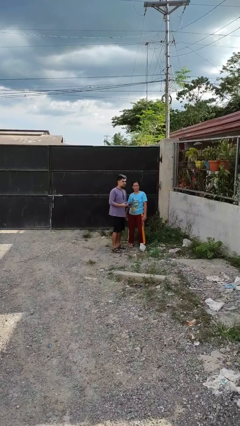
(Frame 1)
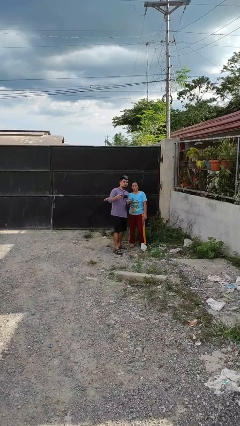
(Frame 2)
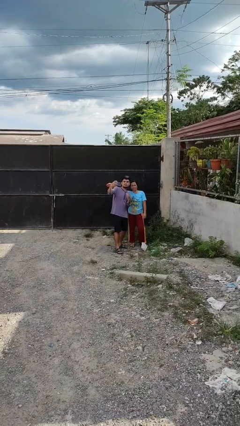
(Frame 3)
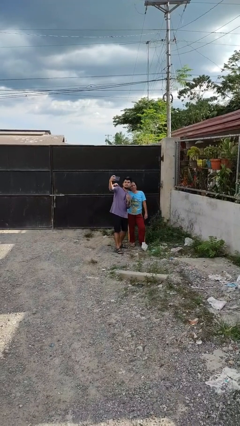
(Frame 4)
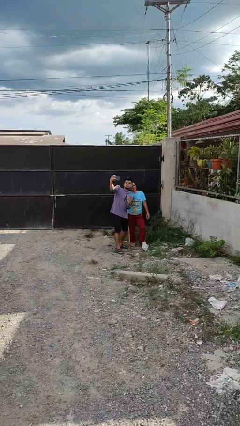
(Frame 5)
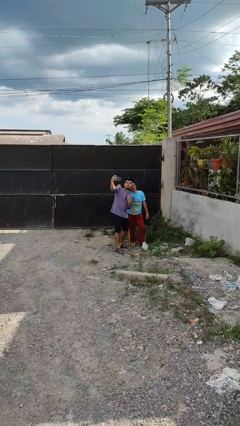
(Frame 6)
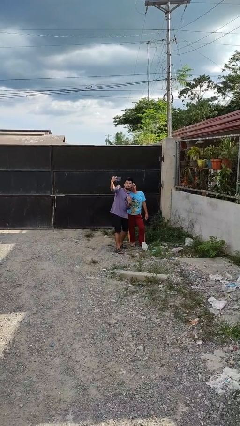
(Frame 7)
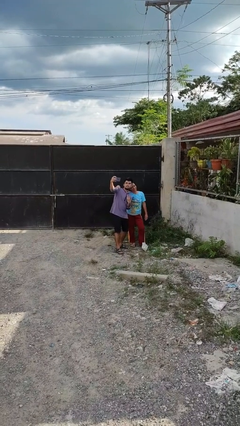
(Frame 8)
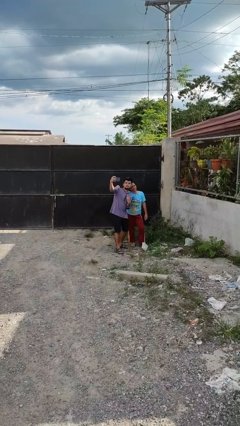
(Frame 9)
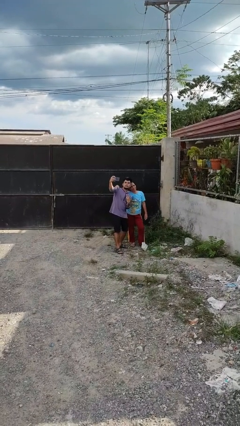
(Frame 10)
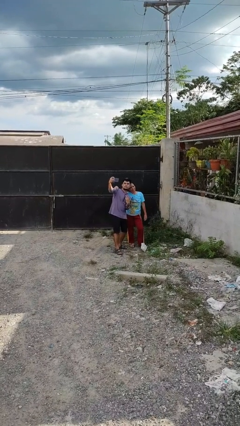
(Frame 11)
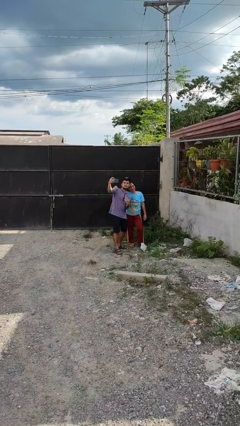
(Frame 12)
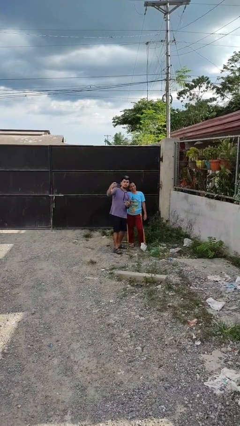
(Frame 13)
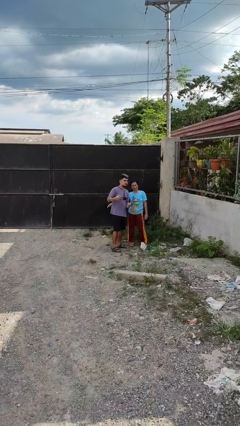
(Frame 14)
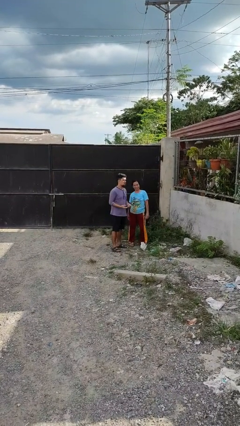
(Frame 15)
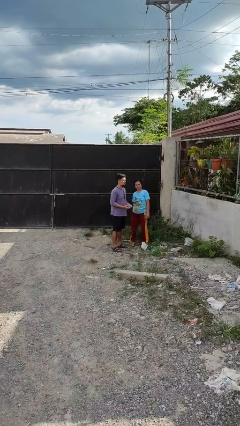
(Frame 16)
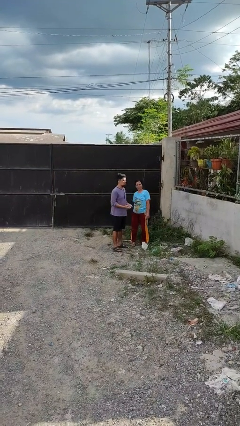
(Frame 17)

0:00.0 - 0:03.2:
person takes selfie with person

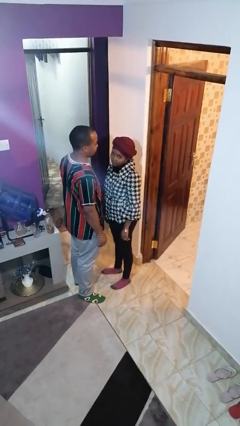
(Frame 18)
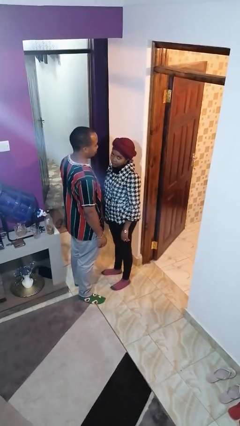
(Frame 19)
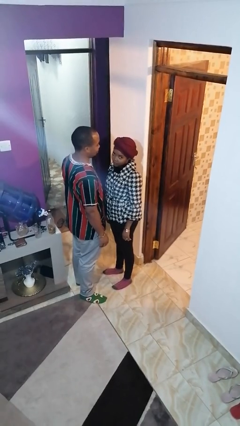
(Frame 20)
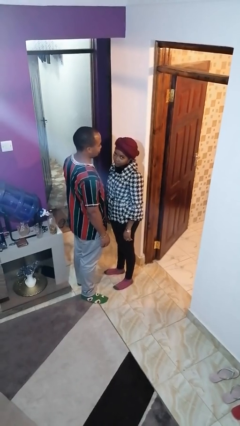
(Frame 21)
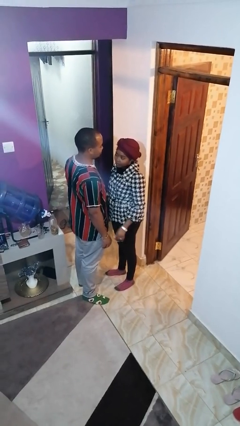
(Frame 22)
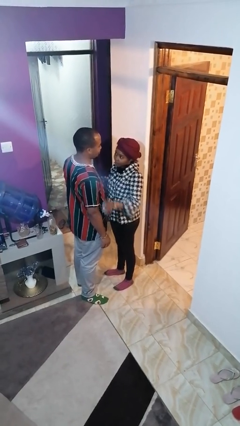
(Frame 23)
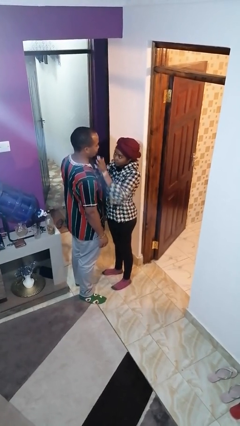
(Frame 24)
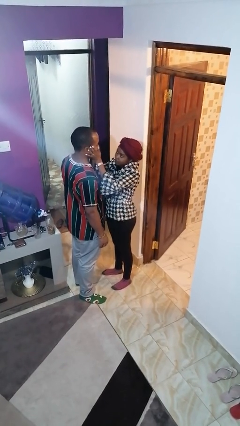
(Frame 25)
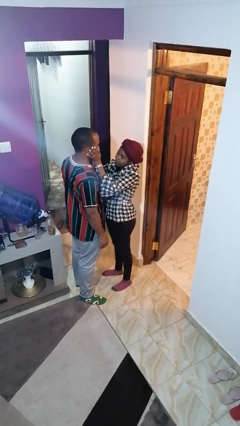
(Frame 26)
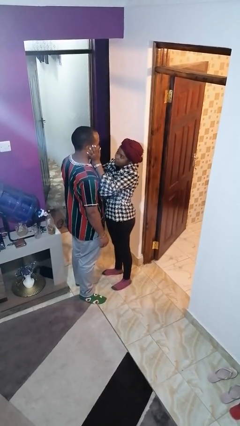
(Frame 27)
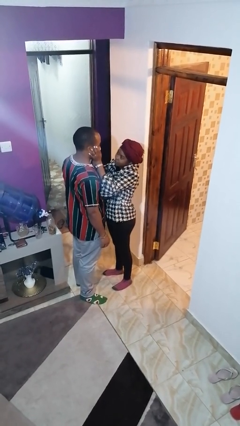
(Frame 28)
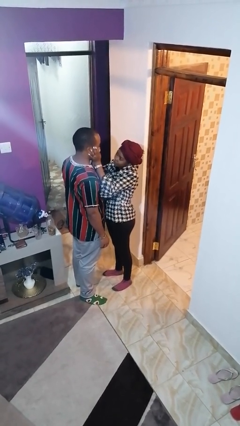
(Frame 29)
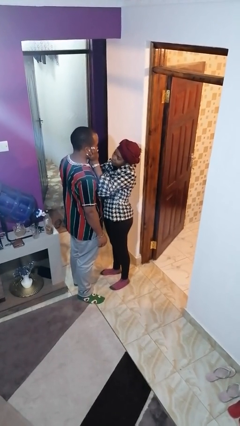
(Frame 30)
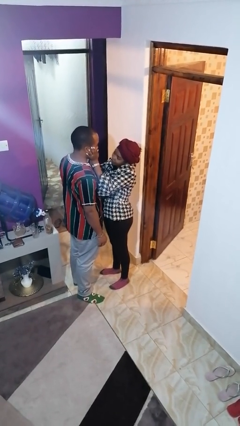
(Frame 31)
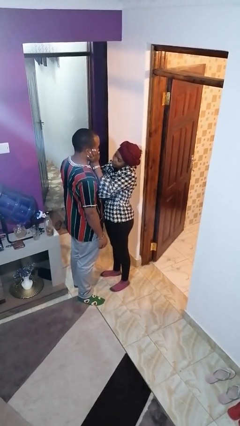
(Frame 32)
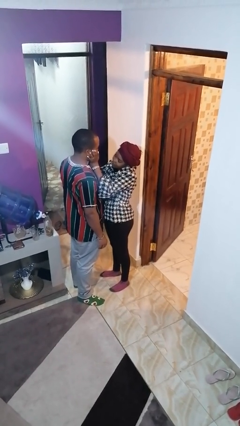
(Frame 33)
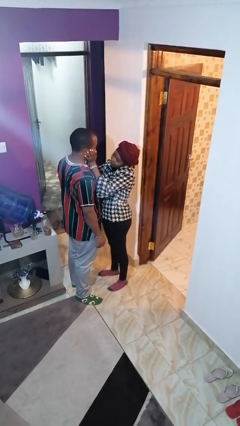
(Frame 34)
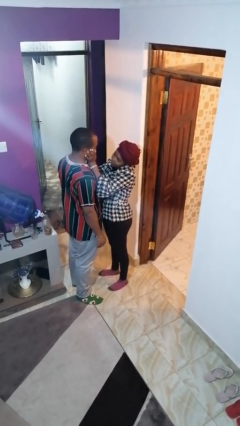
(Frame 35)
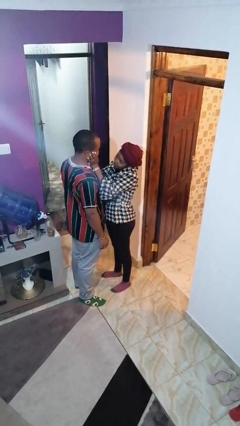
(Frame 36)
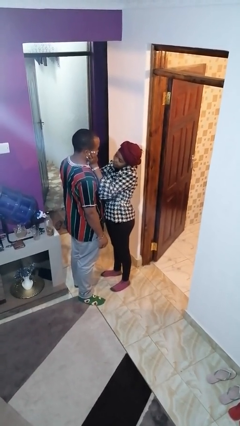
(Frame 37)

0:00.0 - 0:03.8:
person touches face of person

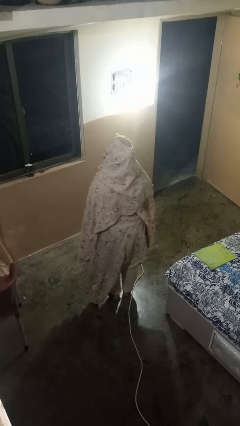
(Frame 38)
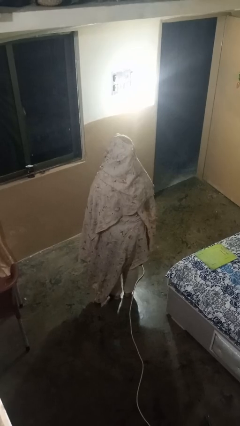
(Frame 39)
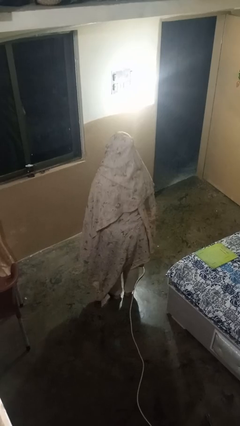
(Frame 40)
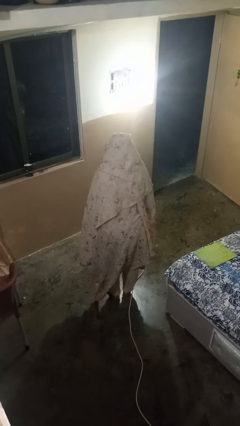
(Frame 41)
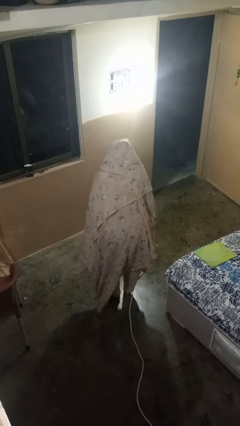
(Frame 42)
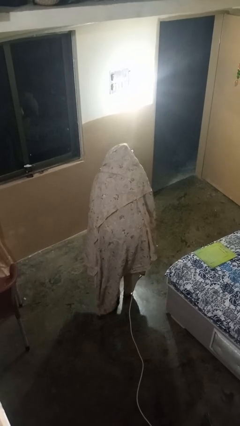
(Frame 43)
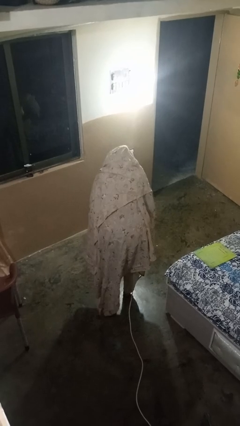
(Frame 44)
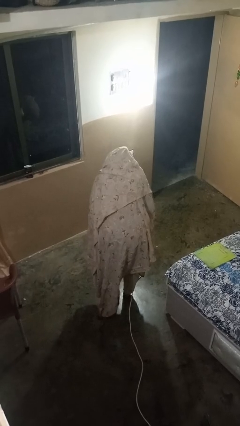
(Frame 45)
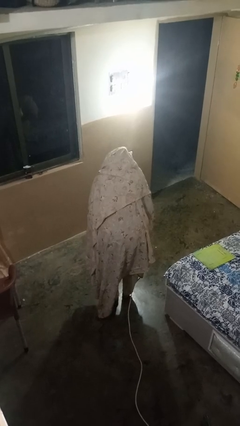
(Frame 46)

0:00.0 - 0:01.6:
person bows

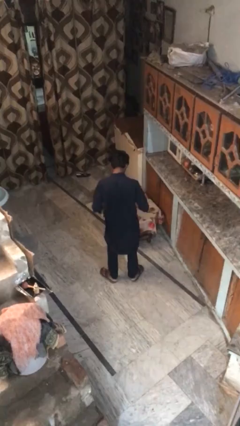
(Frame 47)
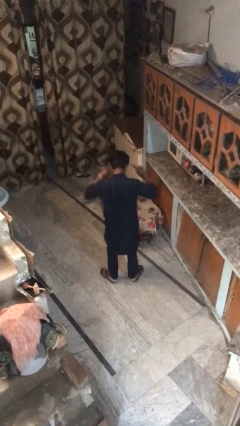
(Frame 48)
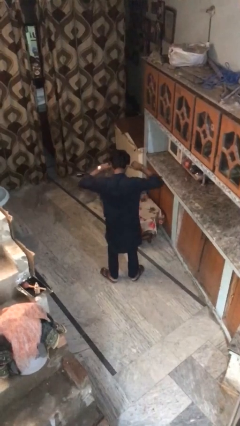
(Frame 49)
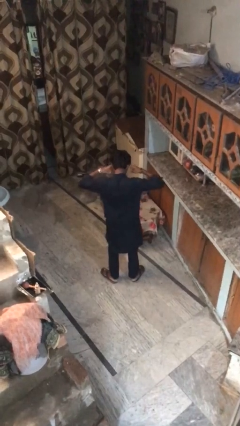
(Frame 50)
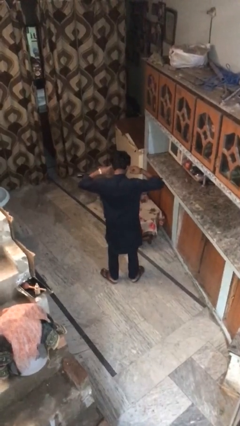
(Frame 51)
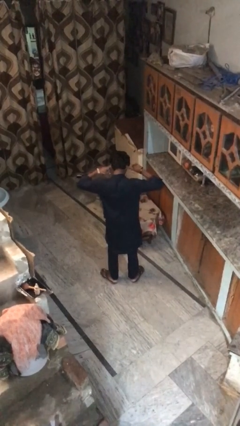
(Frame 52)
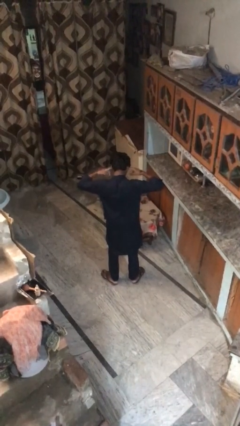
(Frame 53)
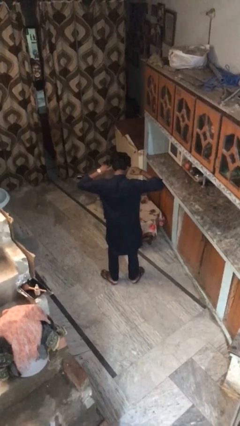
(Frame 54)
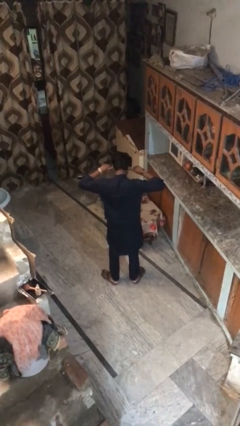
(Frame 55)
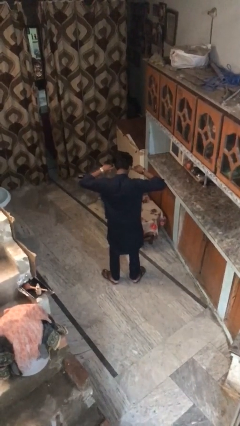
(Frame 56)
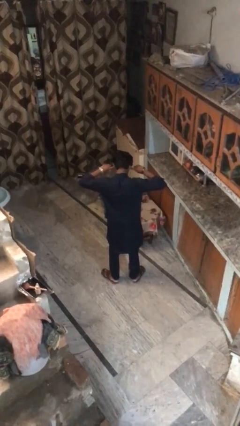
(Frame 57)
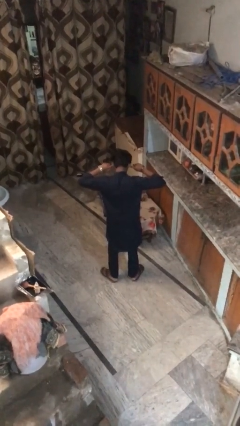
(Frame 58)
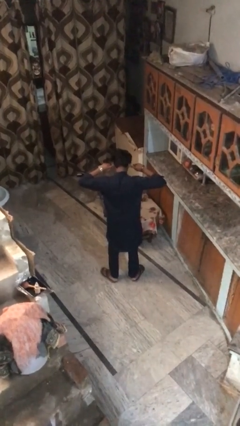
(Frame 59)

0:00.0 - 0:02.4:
person puts fingers in ear

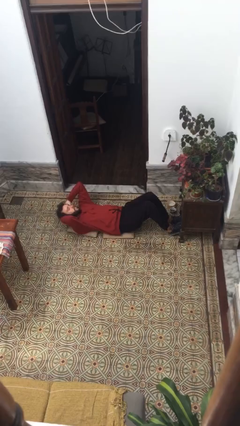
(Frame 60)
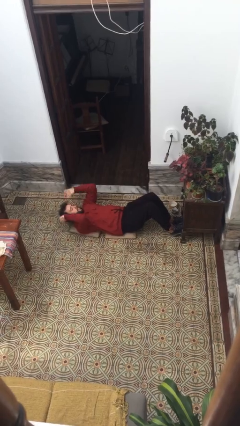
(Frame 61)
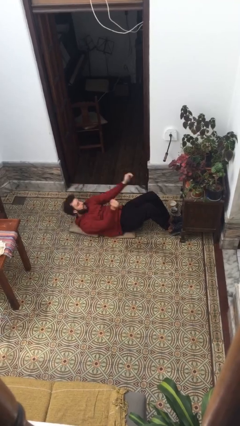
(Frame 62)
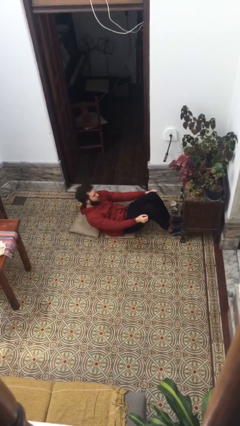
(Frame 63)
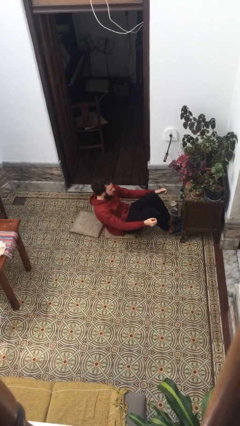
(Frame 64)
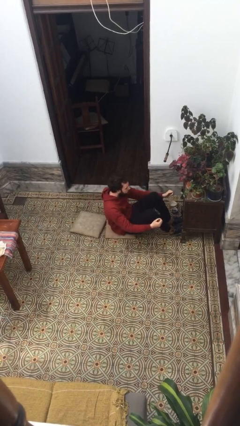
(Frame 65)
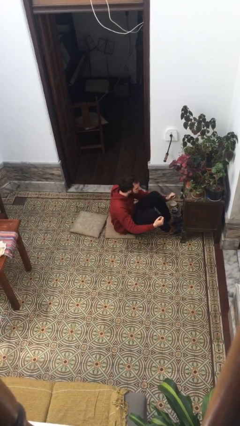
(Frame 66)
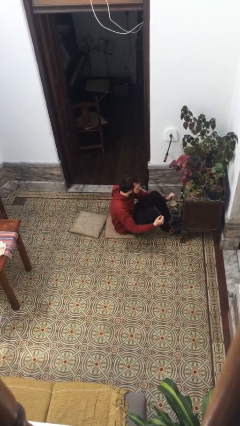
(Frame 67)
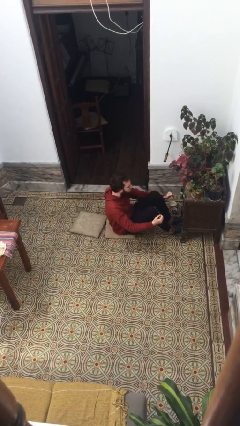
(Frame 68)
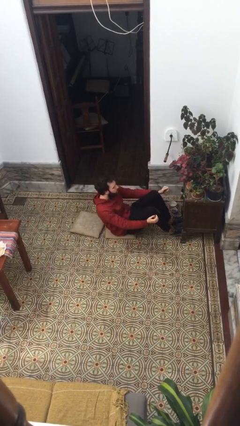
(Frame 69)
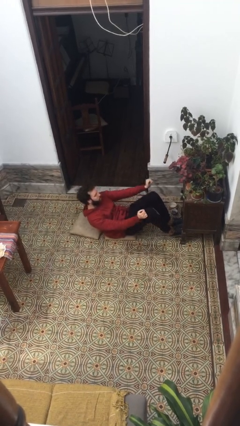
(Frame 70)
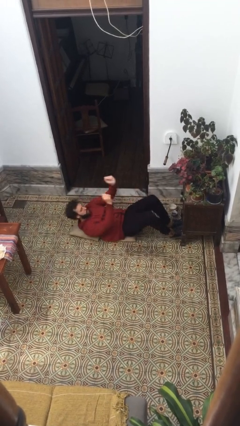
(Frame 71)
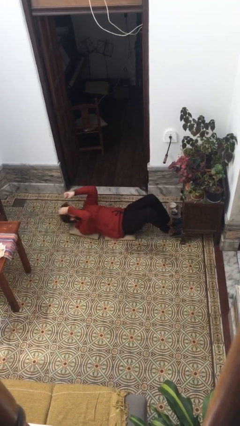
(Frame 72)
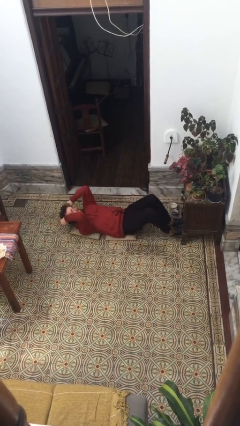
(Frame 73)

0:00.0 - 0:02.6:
person exercises with situp

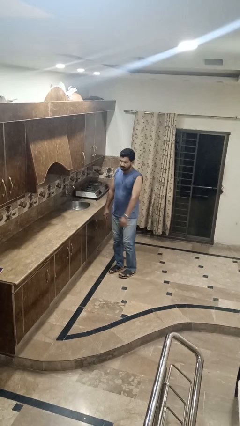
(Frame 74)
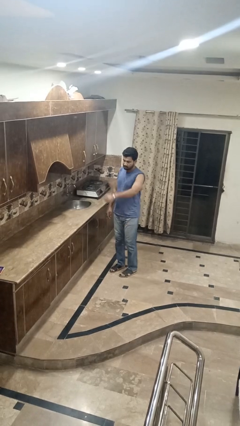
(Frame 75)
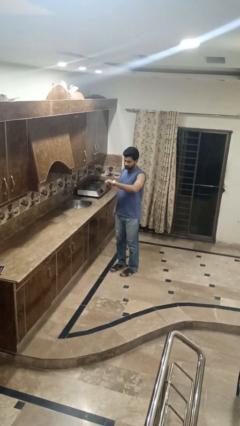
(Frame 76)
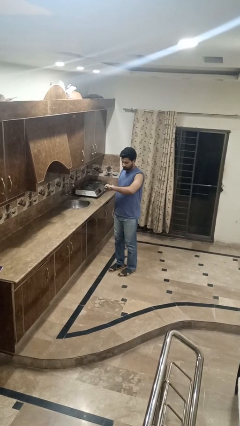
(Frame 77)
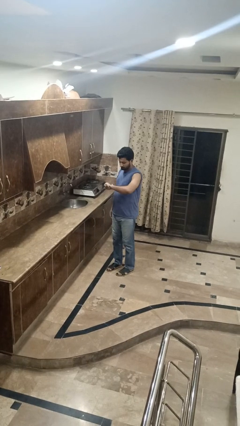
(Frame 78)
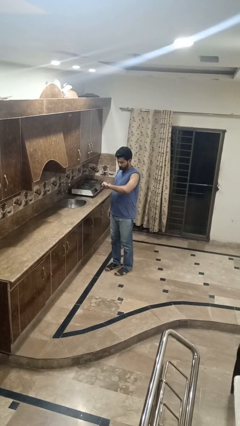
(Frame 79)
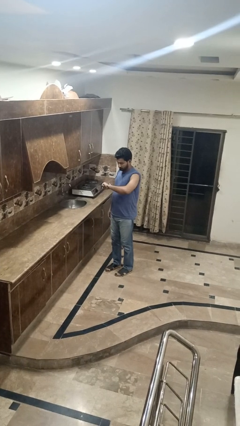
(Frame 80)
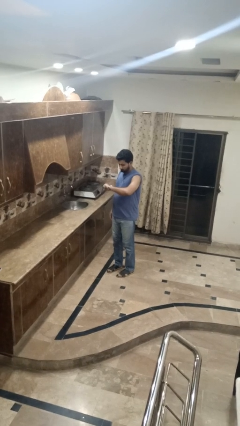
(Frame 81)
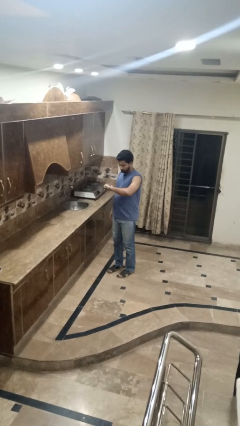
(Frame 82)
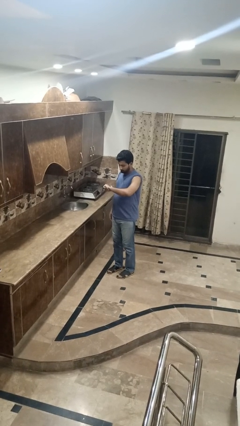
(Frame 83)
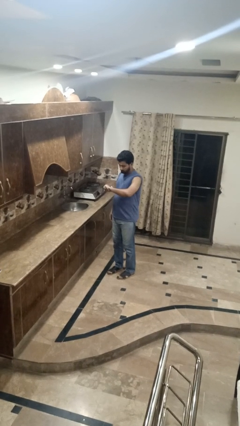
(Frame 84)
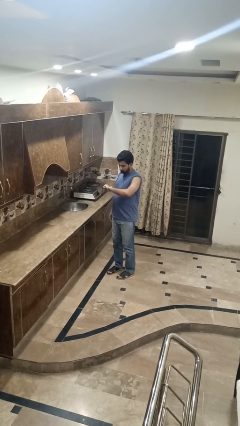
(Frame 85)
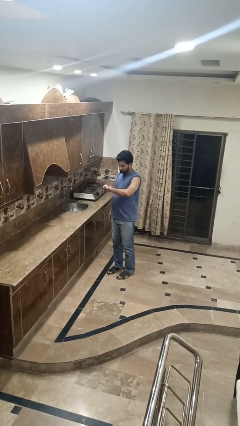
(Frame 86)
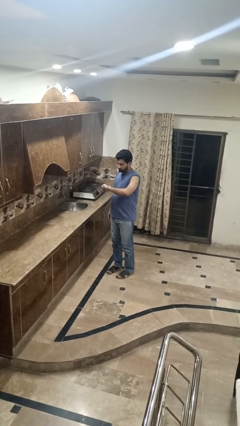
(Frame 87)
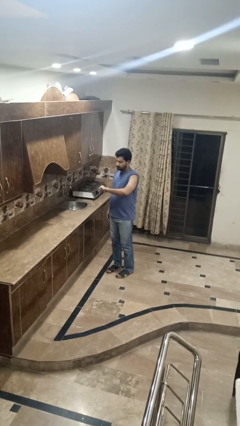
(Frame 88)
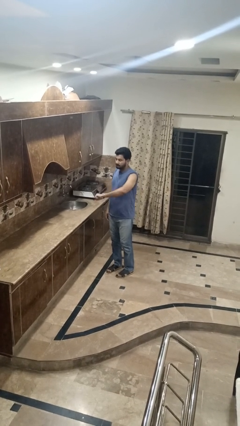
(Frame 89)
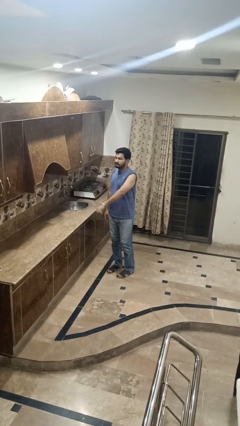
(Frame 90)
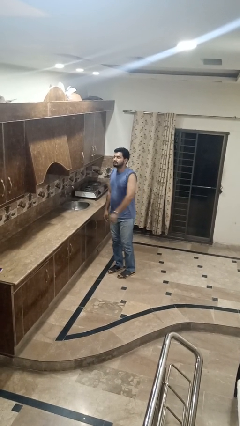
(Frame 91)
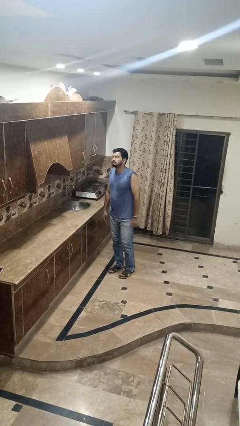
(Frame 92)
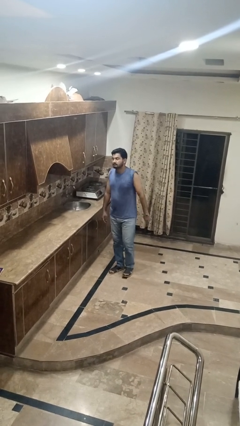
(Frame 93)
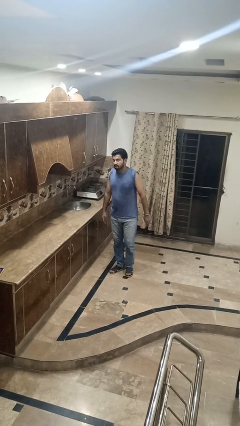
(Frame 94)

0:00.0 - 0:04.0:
person looks at wristwatch

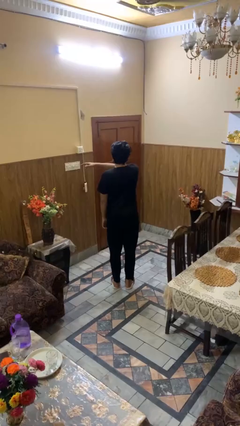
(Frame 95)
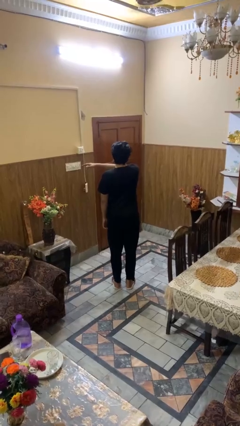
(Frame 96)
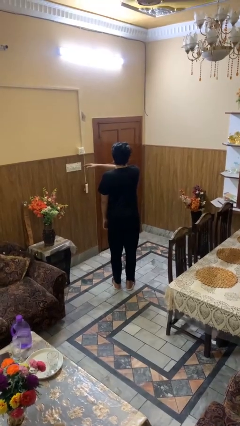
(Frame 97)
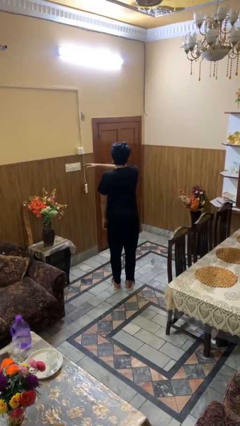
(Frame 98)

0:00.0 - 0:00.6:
person gestures swipe right
